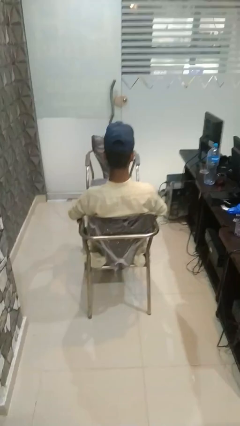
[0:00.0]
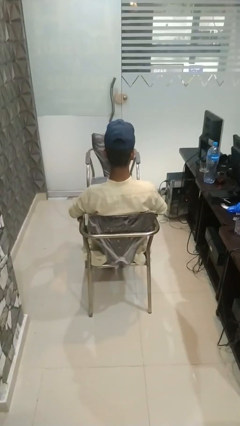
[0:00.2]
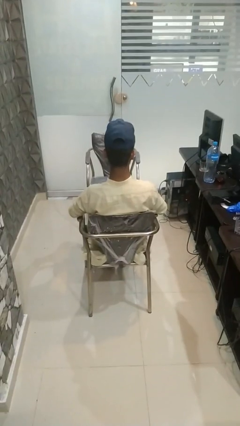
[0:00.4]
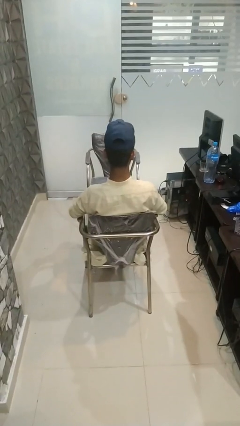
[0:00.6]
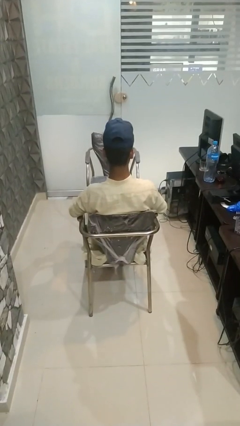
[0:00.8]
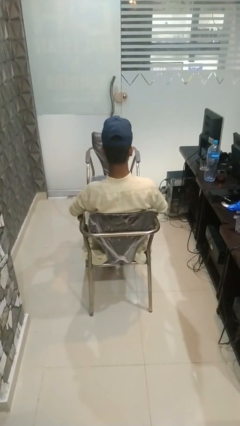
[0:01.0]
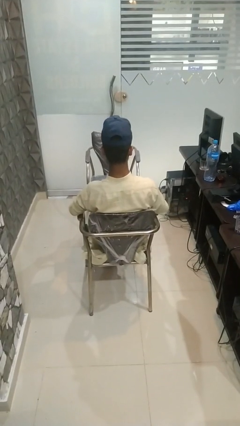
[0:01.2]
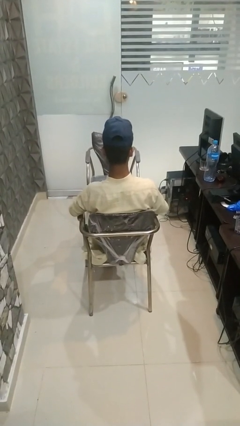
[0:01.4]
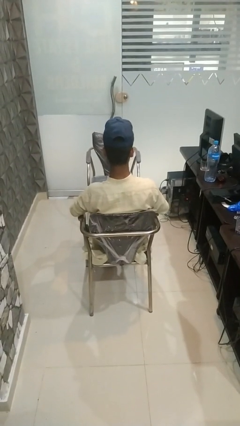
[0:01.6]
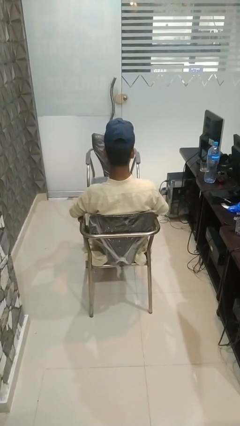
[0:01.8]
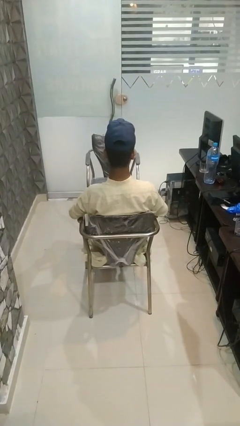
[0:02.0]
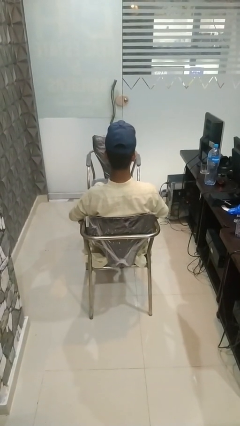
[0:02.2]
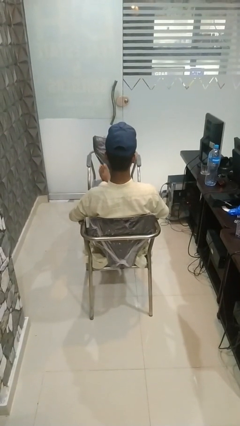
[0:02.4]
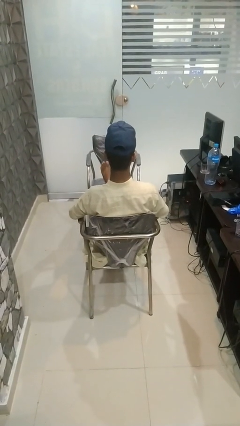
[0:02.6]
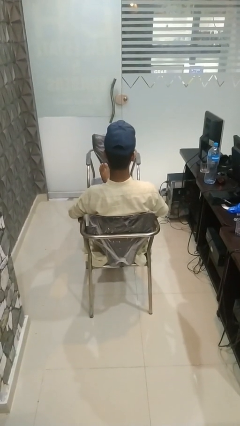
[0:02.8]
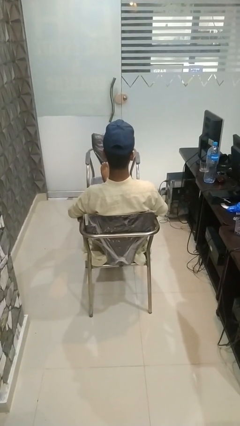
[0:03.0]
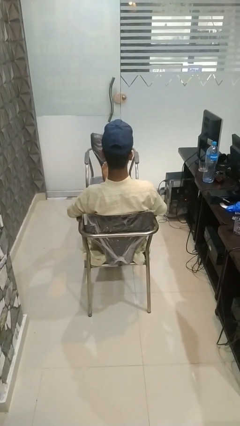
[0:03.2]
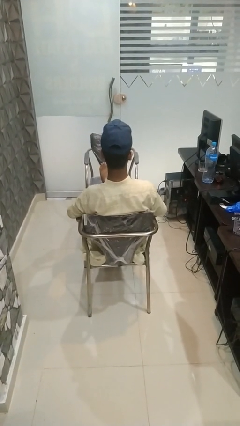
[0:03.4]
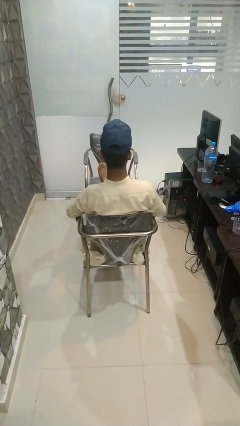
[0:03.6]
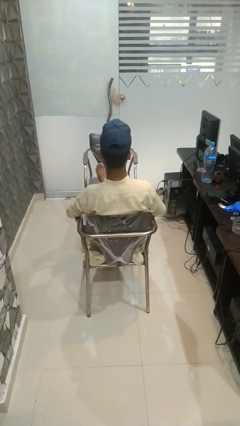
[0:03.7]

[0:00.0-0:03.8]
person puts feet up

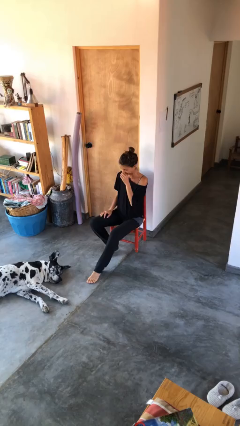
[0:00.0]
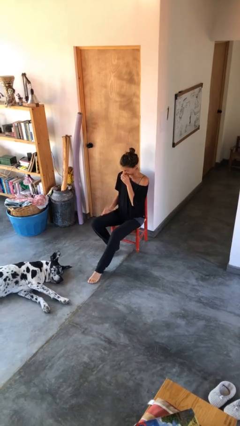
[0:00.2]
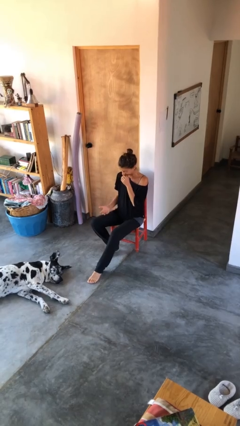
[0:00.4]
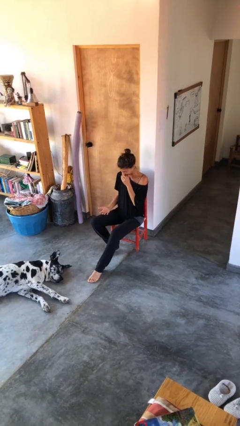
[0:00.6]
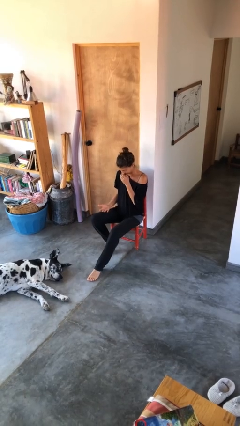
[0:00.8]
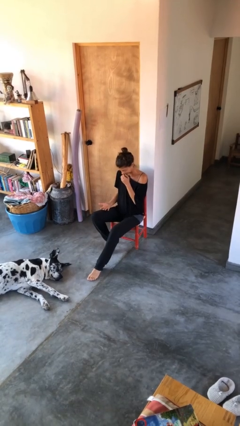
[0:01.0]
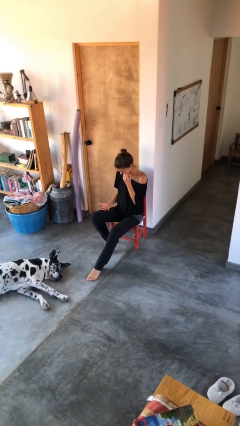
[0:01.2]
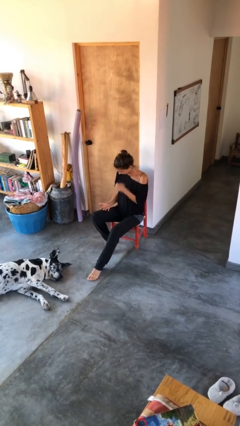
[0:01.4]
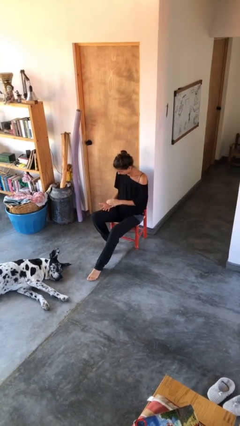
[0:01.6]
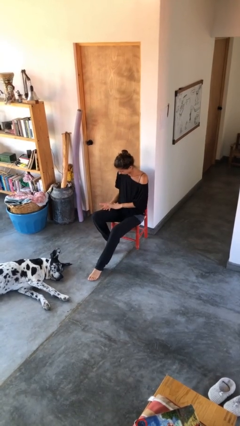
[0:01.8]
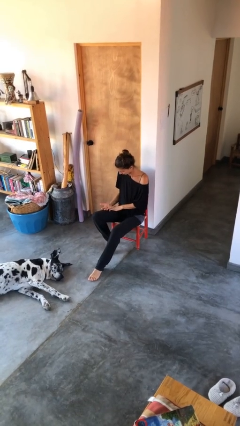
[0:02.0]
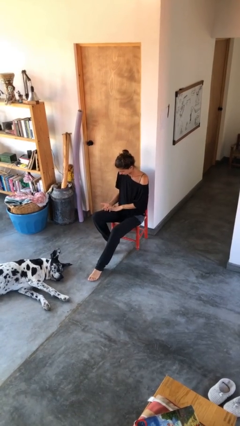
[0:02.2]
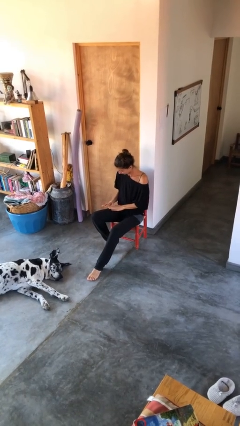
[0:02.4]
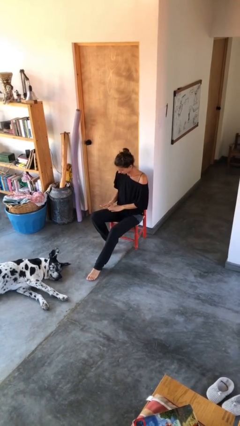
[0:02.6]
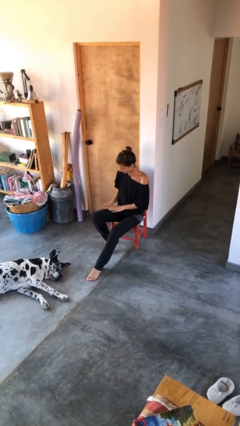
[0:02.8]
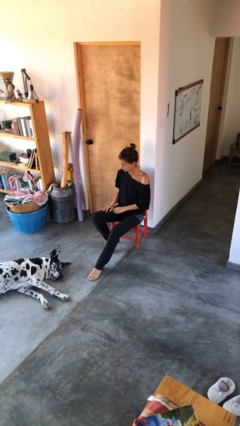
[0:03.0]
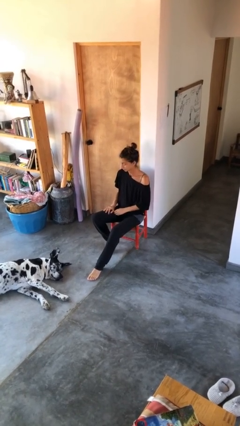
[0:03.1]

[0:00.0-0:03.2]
person looks at hands in lap

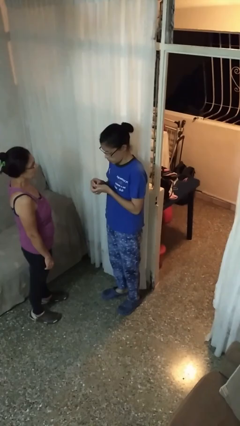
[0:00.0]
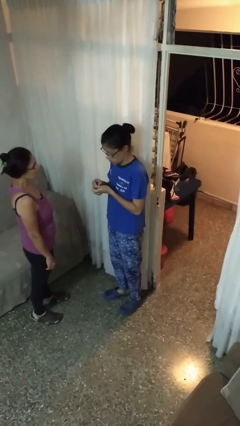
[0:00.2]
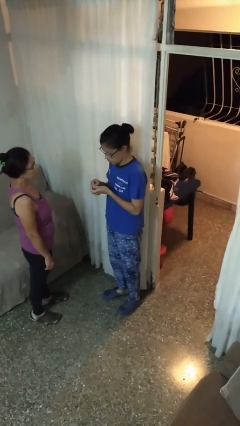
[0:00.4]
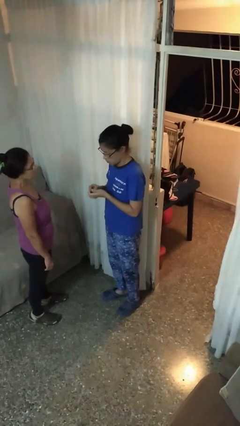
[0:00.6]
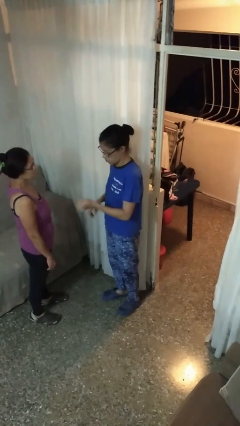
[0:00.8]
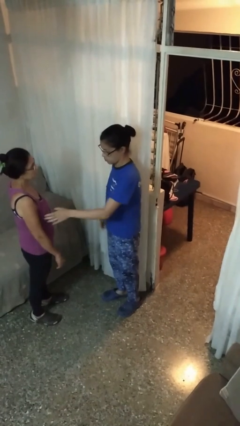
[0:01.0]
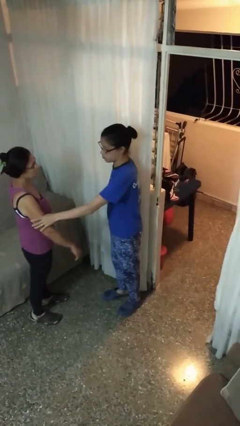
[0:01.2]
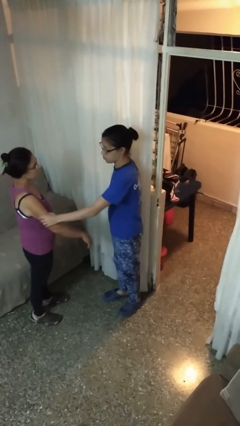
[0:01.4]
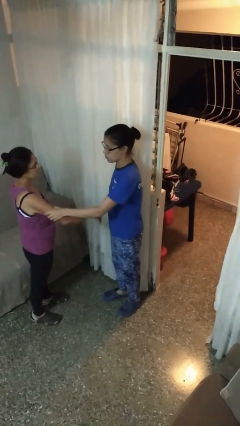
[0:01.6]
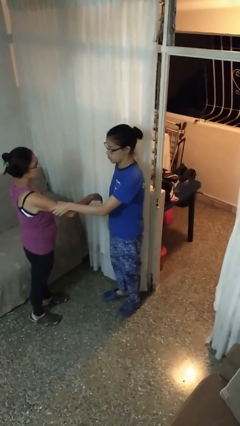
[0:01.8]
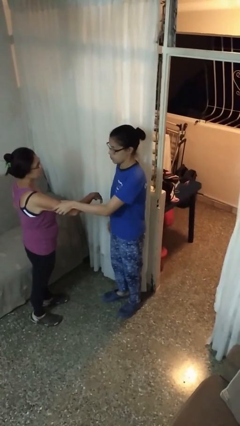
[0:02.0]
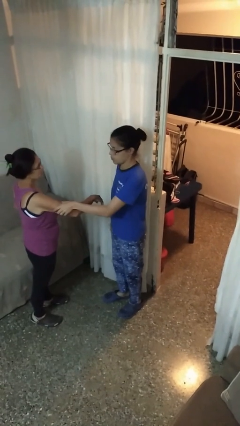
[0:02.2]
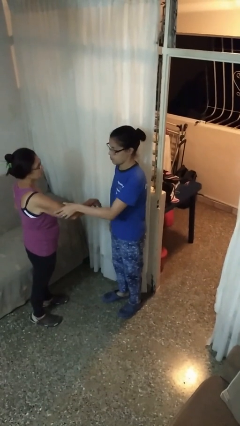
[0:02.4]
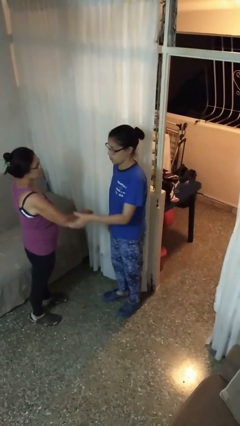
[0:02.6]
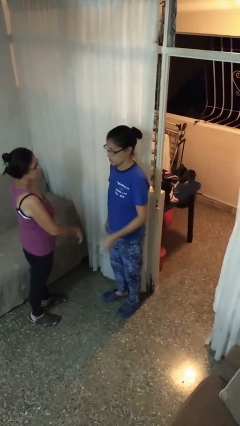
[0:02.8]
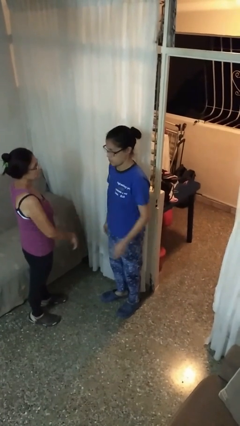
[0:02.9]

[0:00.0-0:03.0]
person grabs person by bicep

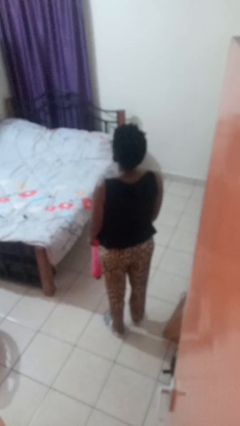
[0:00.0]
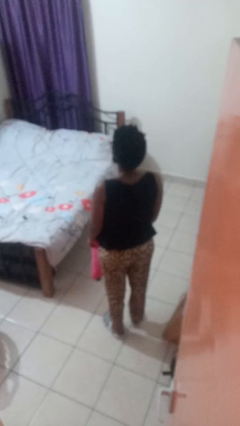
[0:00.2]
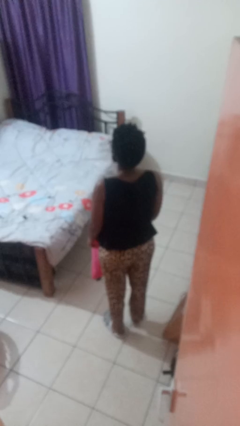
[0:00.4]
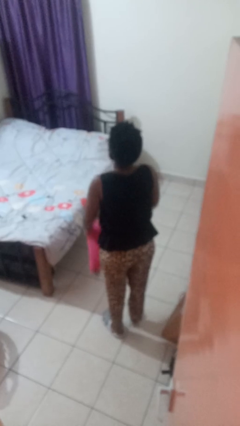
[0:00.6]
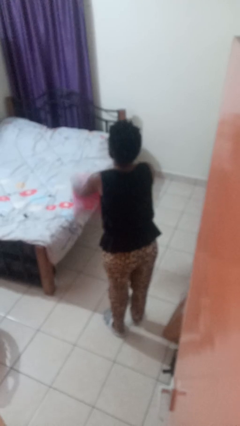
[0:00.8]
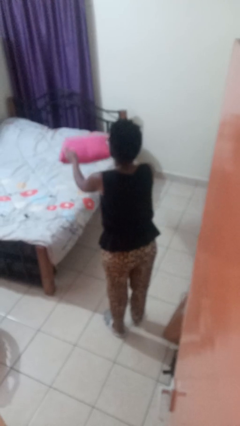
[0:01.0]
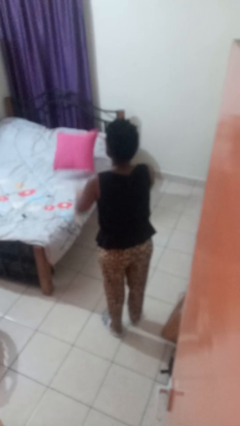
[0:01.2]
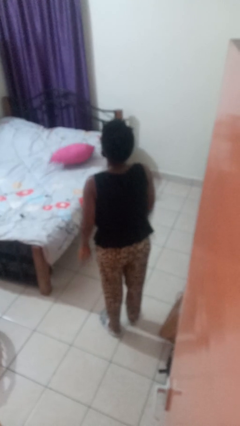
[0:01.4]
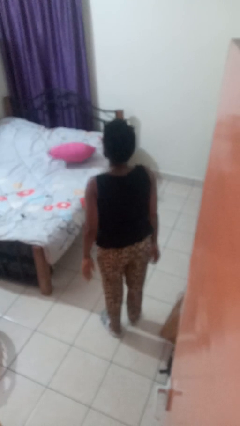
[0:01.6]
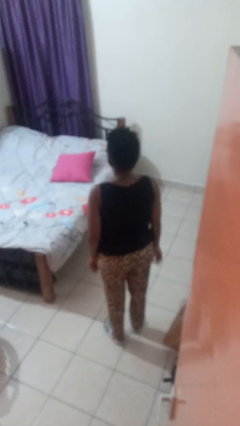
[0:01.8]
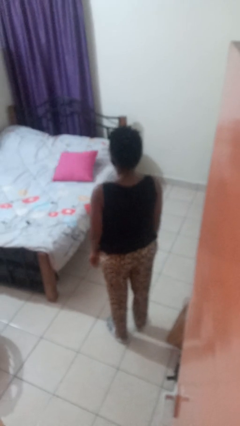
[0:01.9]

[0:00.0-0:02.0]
person throws object on bed

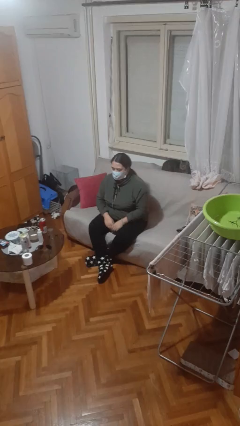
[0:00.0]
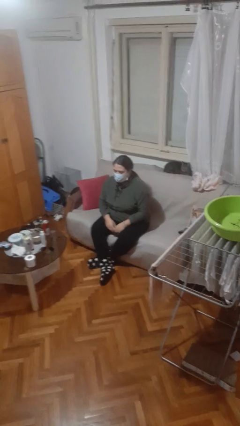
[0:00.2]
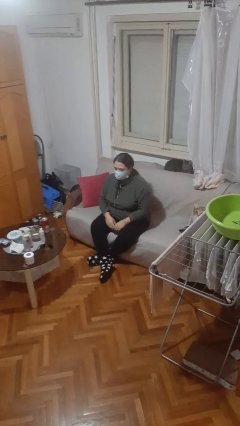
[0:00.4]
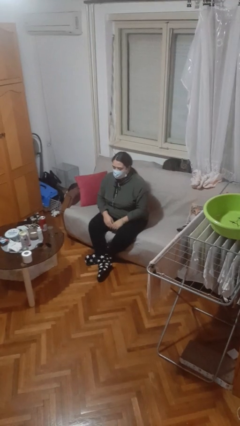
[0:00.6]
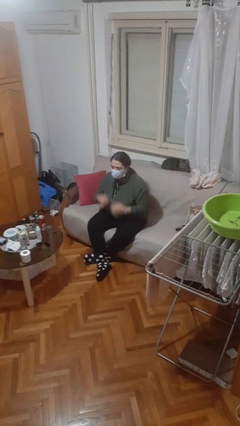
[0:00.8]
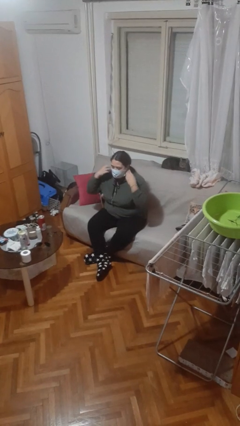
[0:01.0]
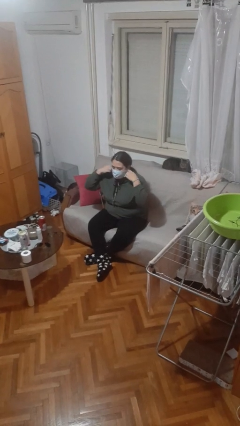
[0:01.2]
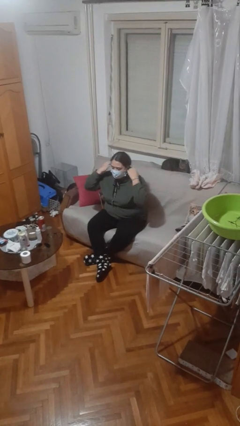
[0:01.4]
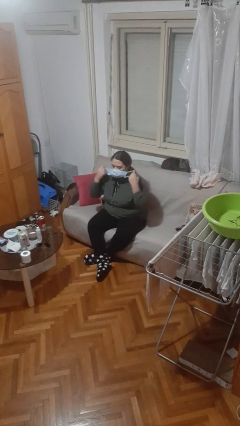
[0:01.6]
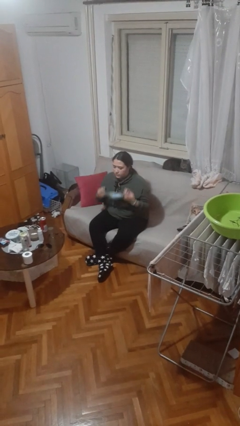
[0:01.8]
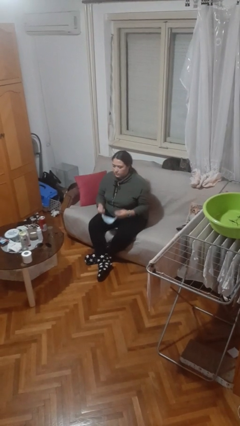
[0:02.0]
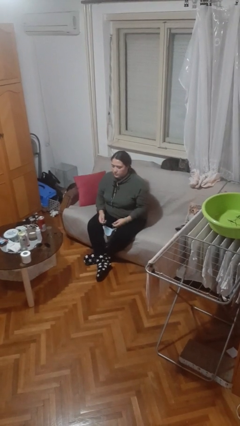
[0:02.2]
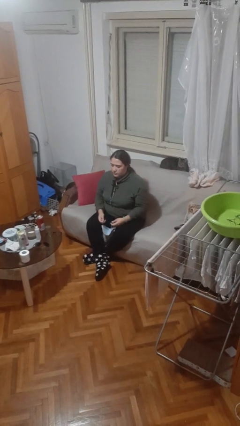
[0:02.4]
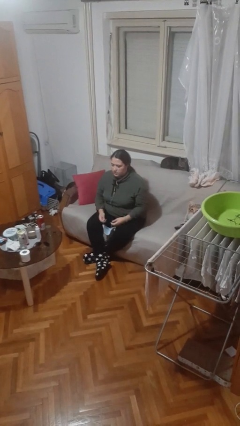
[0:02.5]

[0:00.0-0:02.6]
person takes off facemask

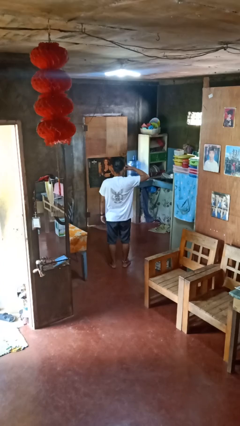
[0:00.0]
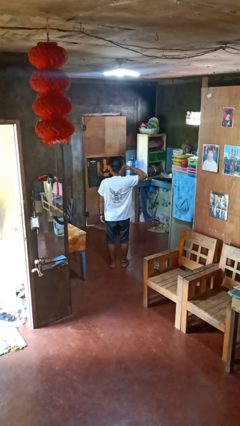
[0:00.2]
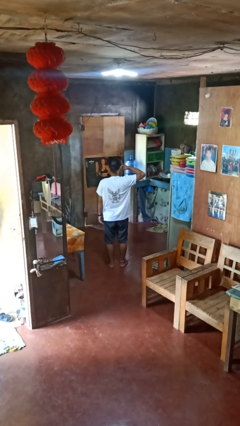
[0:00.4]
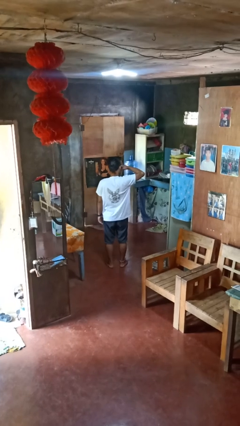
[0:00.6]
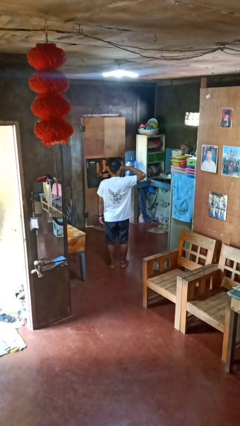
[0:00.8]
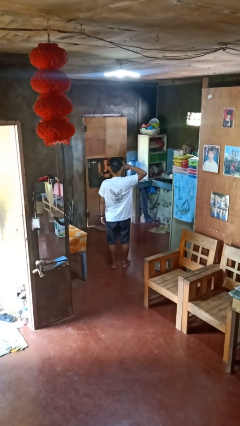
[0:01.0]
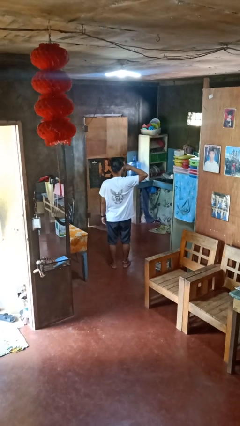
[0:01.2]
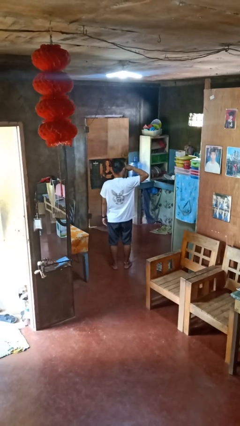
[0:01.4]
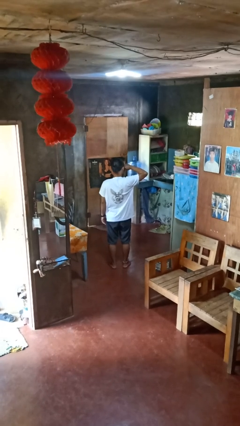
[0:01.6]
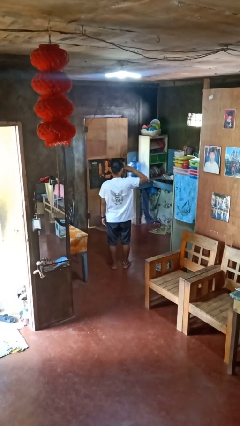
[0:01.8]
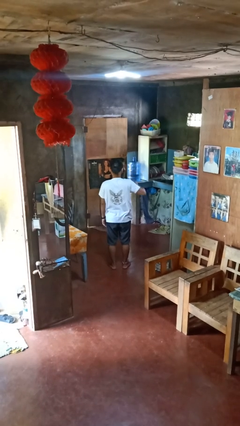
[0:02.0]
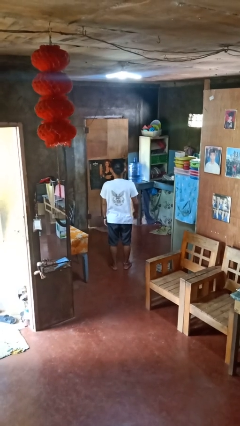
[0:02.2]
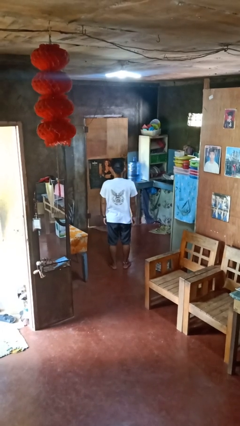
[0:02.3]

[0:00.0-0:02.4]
person rubs eyes

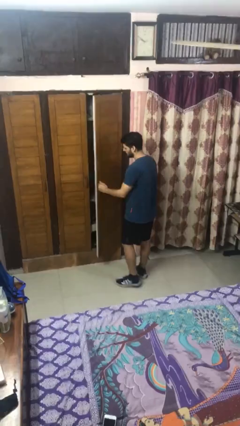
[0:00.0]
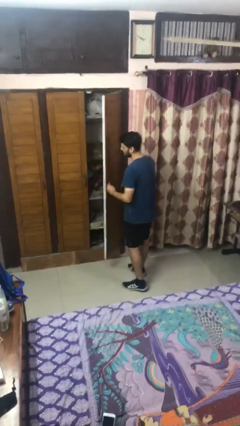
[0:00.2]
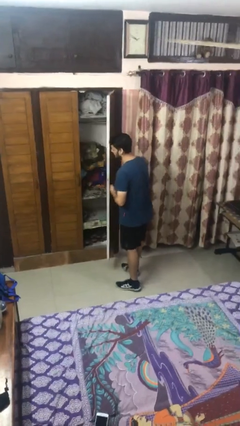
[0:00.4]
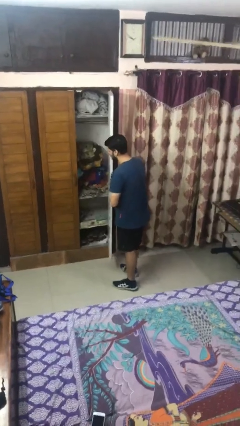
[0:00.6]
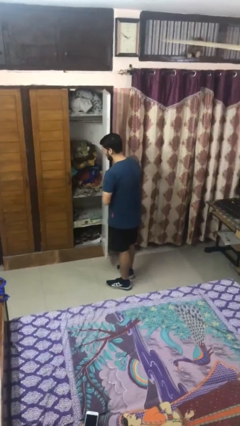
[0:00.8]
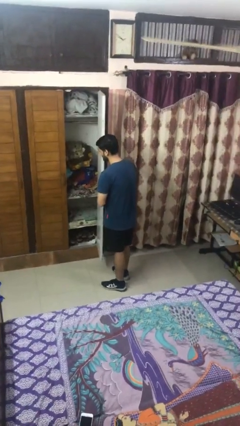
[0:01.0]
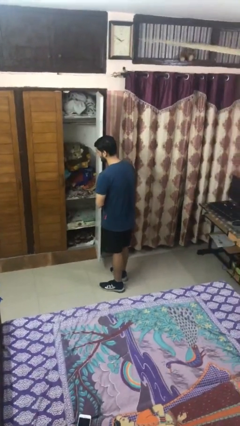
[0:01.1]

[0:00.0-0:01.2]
person opens facility door
